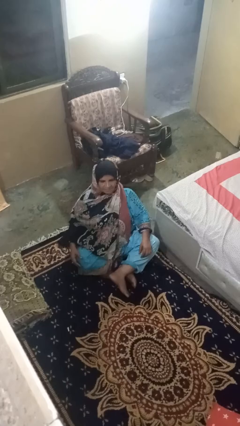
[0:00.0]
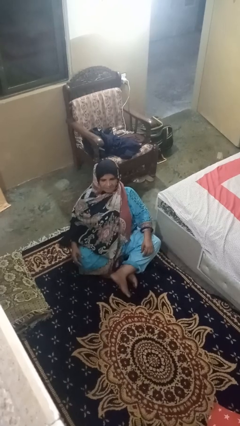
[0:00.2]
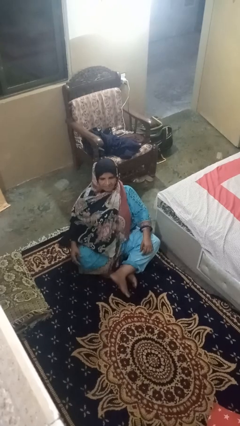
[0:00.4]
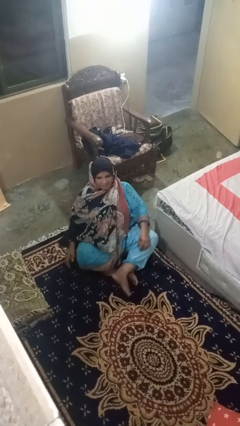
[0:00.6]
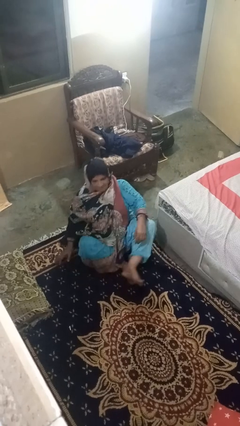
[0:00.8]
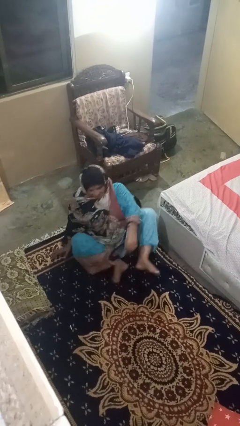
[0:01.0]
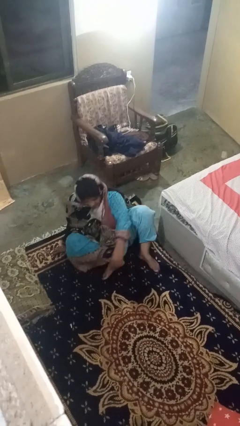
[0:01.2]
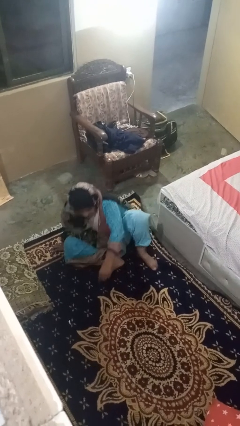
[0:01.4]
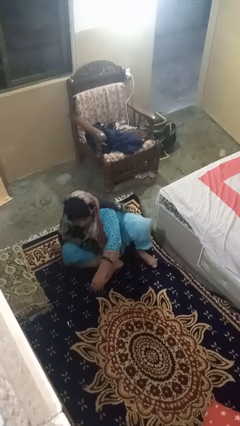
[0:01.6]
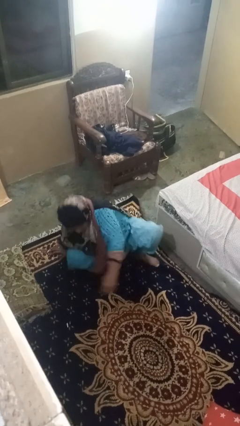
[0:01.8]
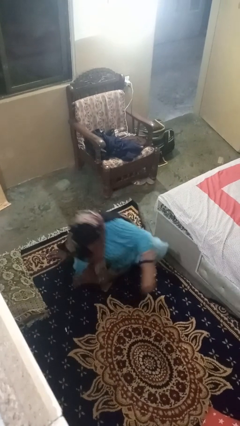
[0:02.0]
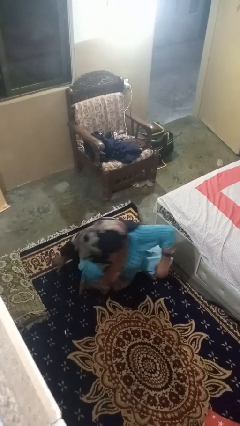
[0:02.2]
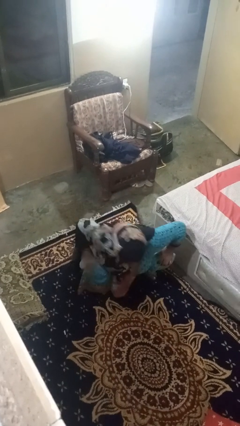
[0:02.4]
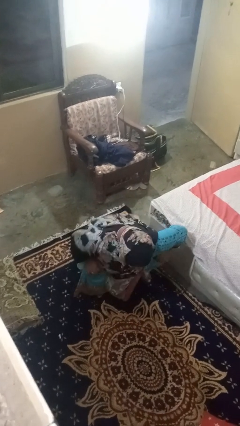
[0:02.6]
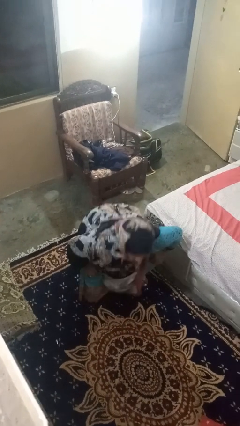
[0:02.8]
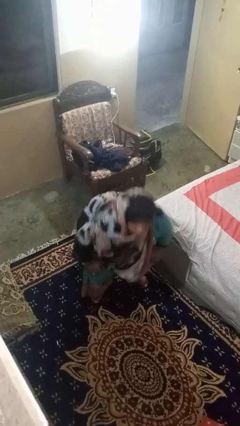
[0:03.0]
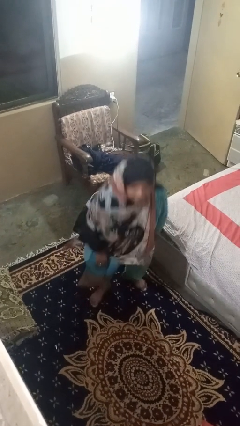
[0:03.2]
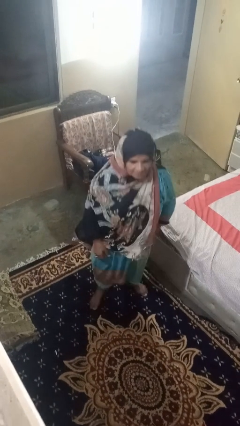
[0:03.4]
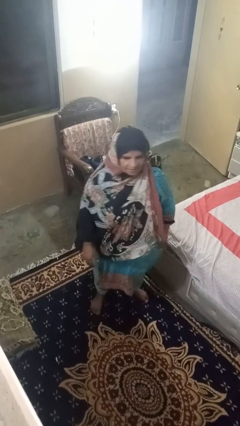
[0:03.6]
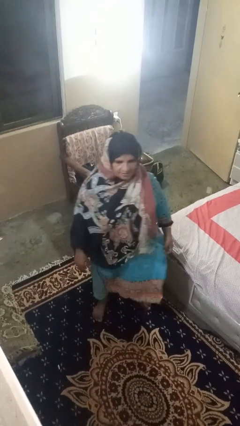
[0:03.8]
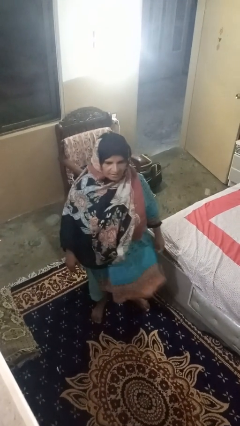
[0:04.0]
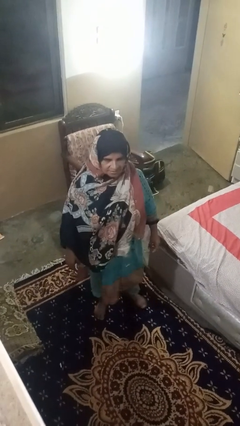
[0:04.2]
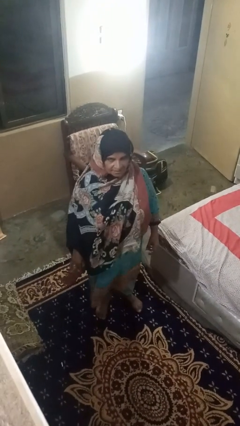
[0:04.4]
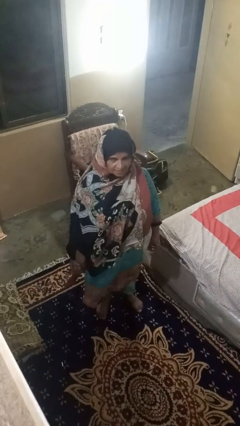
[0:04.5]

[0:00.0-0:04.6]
person stands up from floor

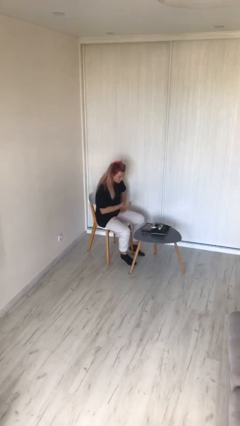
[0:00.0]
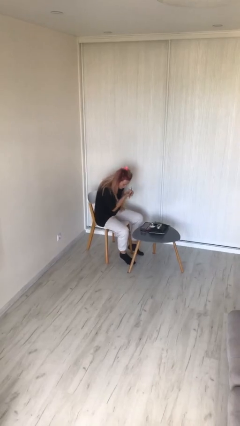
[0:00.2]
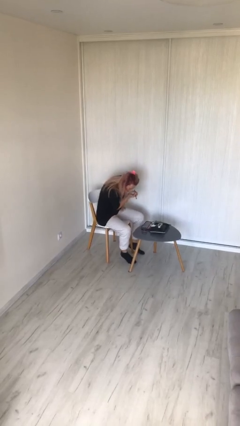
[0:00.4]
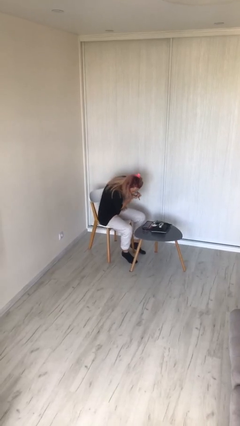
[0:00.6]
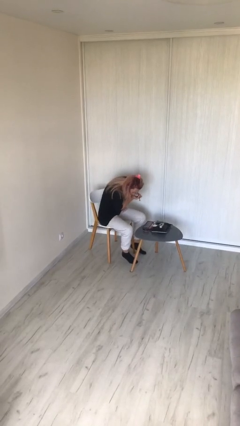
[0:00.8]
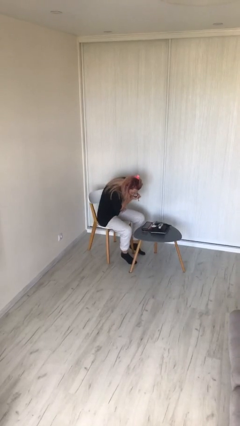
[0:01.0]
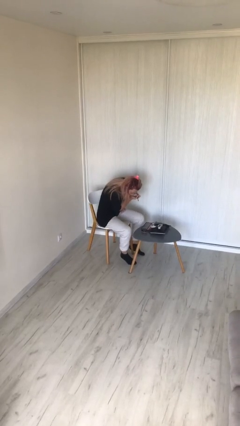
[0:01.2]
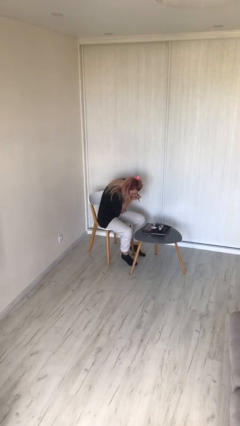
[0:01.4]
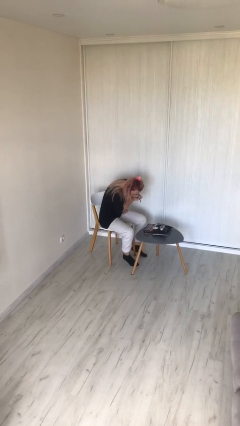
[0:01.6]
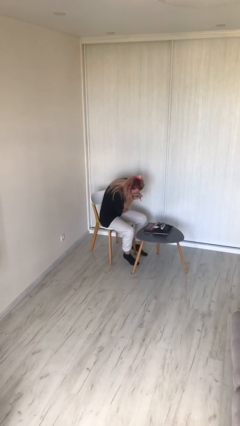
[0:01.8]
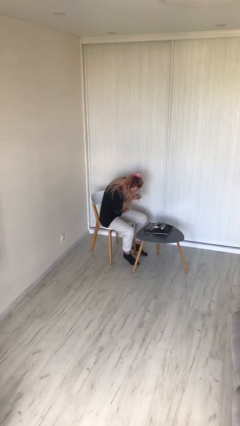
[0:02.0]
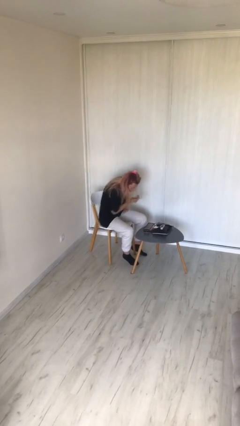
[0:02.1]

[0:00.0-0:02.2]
person applies eye makeup

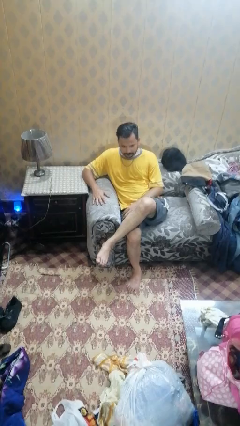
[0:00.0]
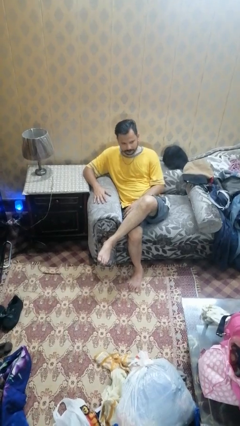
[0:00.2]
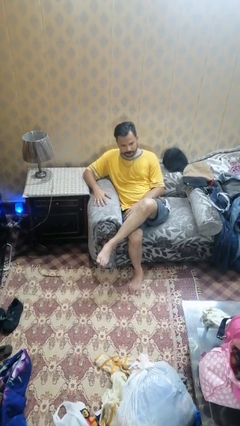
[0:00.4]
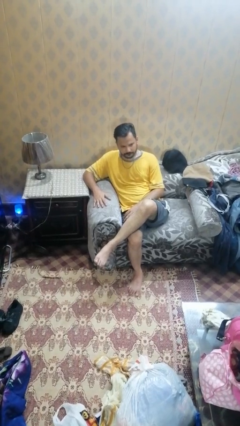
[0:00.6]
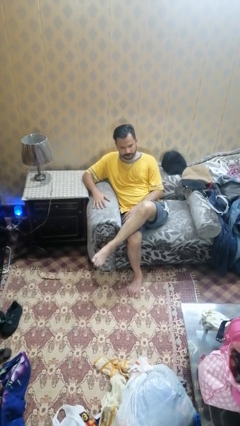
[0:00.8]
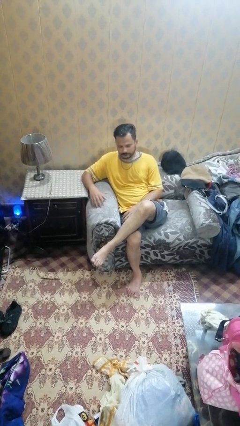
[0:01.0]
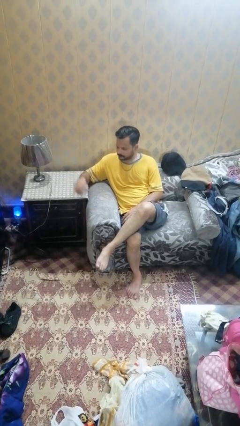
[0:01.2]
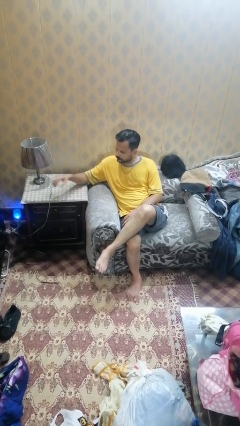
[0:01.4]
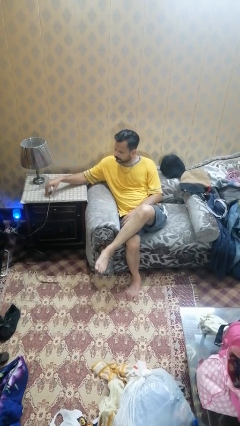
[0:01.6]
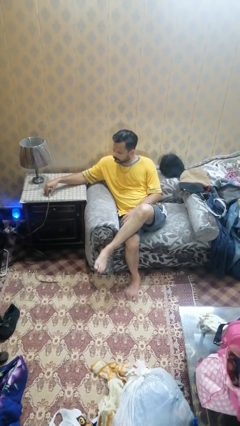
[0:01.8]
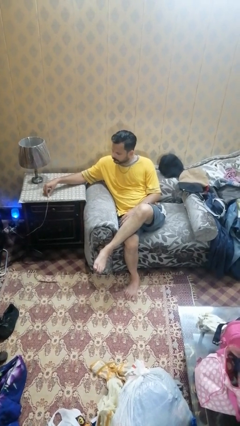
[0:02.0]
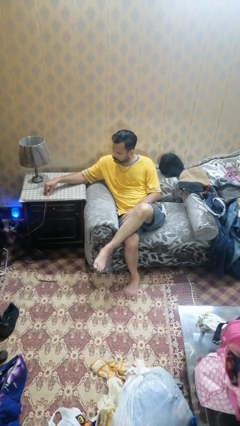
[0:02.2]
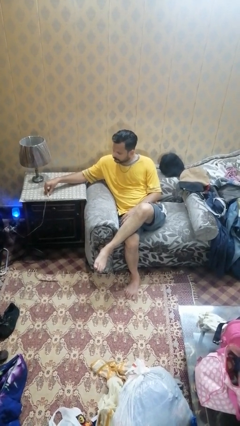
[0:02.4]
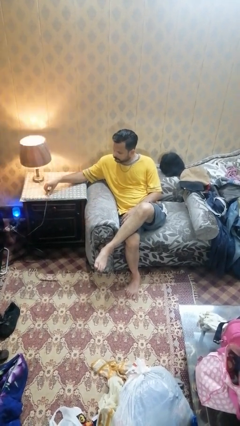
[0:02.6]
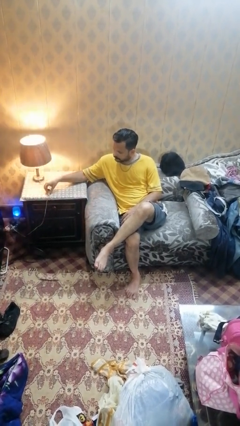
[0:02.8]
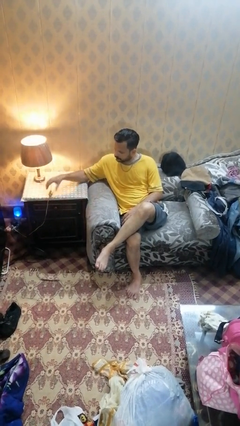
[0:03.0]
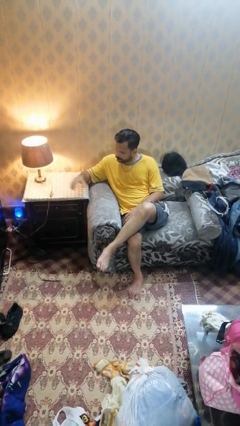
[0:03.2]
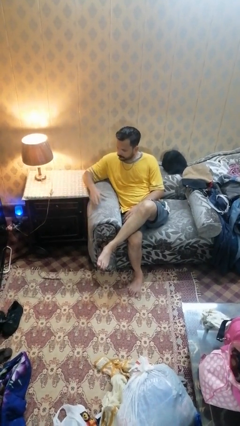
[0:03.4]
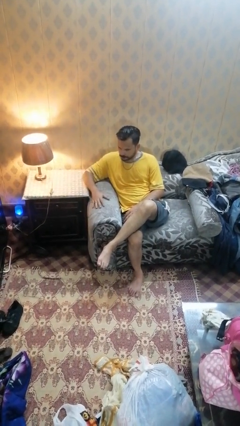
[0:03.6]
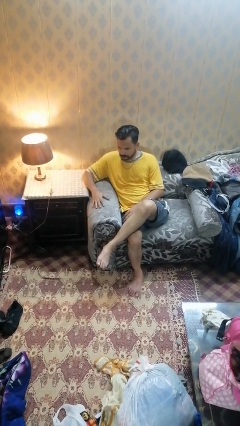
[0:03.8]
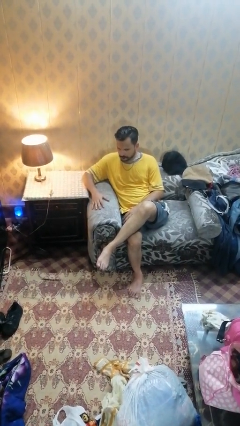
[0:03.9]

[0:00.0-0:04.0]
person turns on lamp

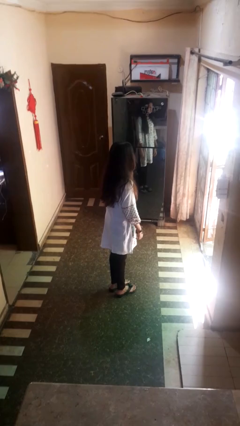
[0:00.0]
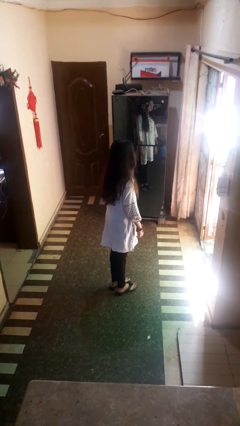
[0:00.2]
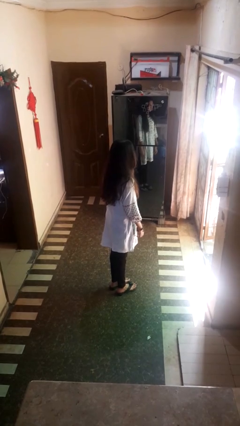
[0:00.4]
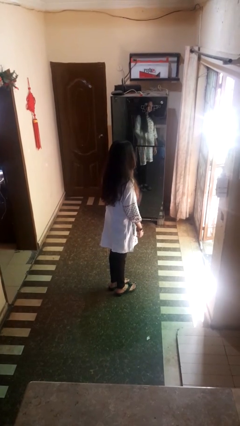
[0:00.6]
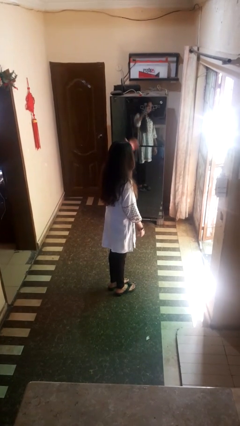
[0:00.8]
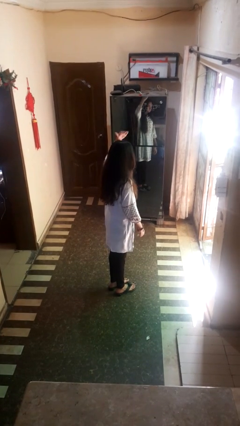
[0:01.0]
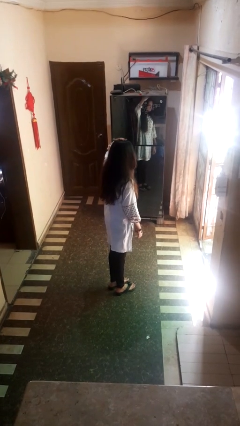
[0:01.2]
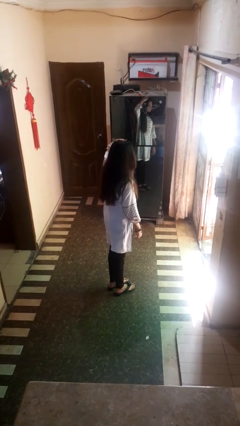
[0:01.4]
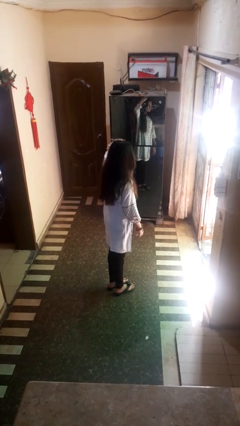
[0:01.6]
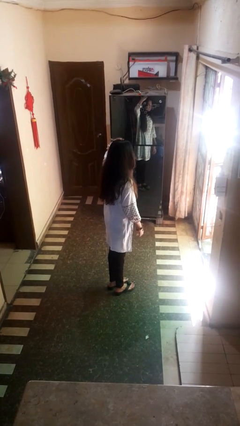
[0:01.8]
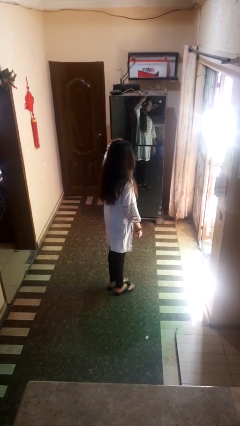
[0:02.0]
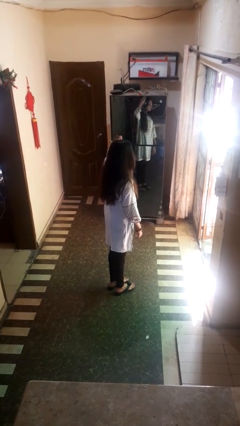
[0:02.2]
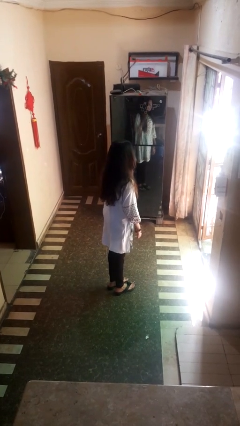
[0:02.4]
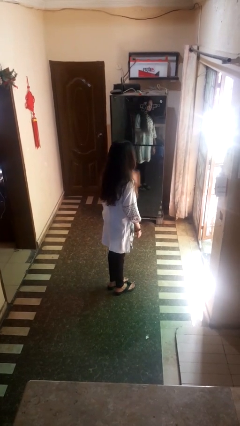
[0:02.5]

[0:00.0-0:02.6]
person pats head

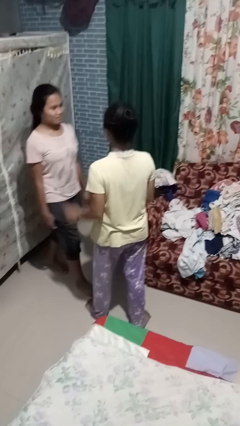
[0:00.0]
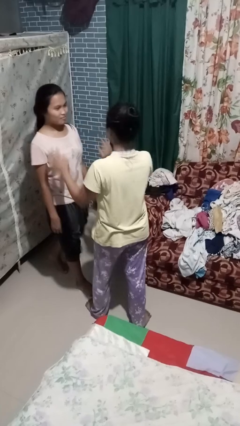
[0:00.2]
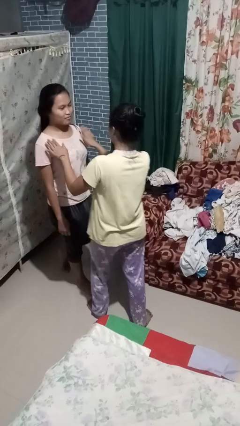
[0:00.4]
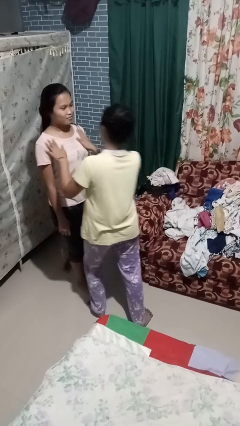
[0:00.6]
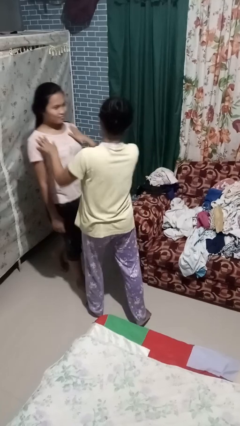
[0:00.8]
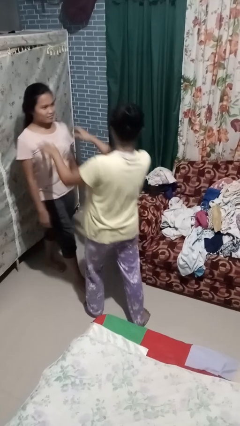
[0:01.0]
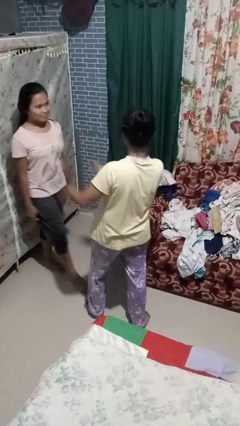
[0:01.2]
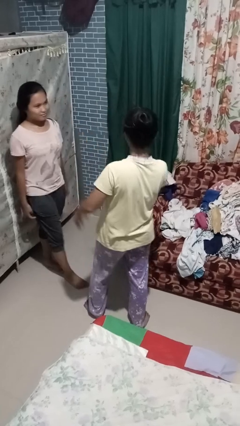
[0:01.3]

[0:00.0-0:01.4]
person shoves person

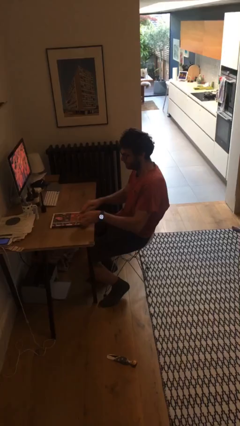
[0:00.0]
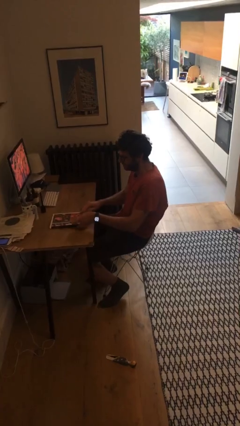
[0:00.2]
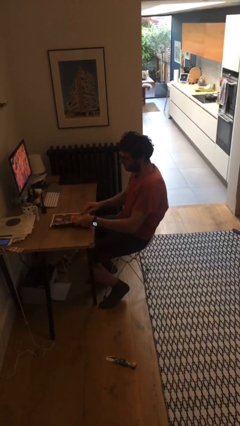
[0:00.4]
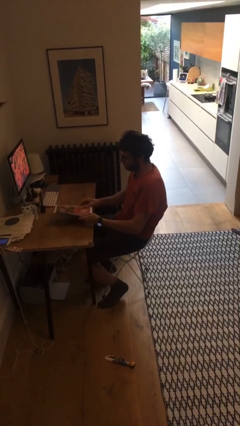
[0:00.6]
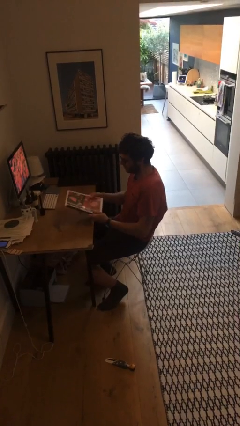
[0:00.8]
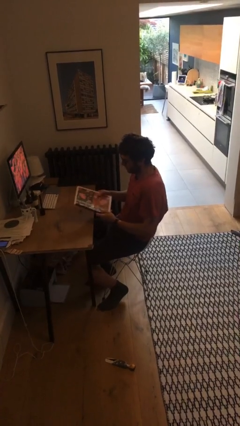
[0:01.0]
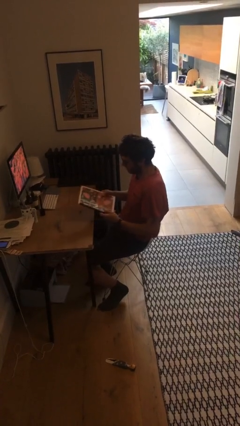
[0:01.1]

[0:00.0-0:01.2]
person picks up object from table
